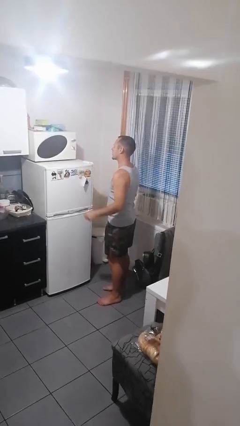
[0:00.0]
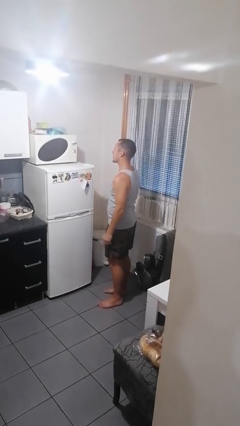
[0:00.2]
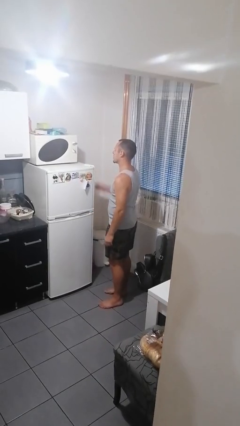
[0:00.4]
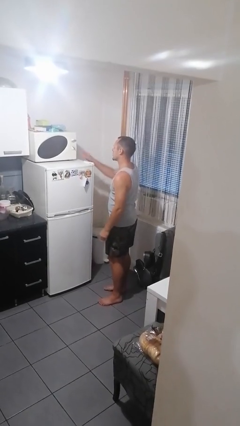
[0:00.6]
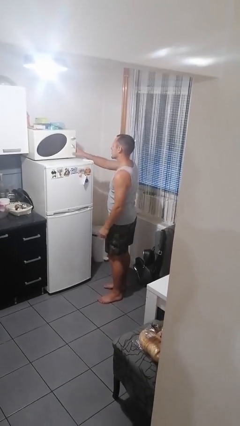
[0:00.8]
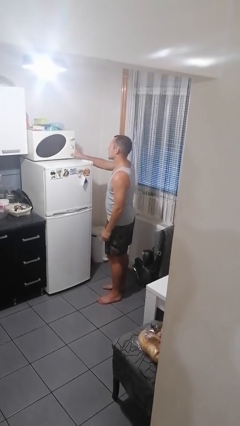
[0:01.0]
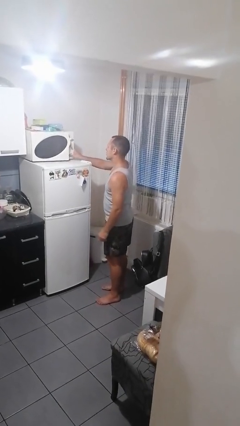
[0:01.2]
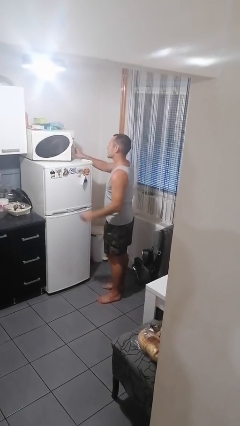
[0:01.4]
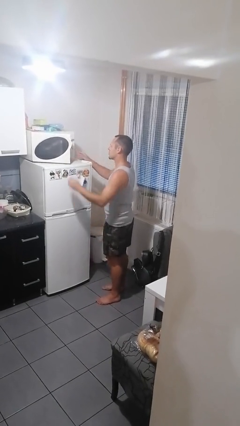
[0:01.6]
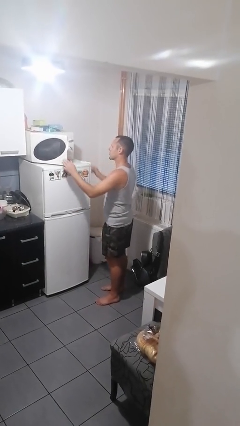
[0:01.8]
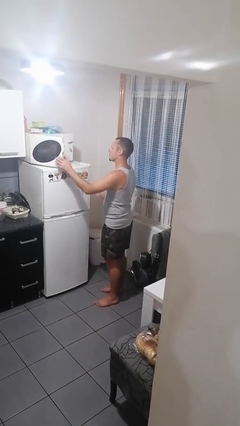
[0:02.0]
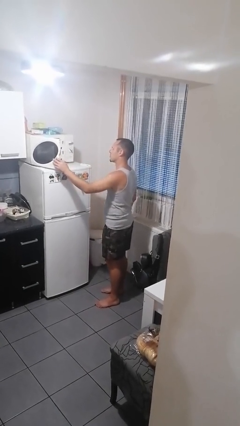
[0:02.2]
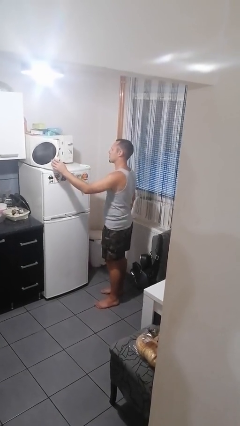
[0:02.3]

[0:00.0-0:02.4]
person opens microwave

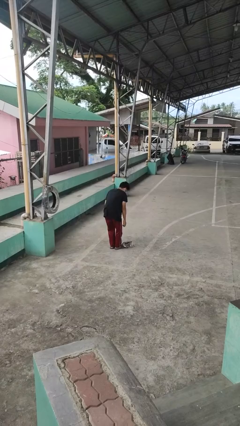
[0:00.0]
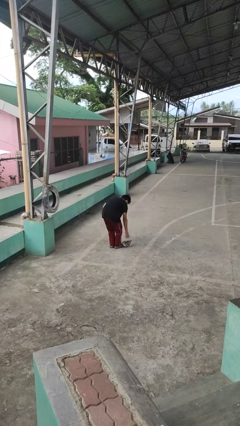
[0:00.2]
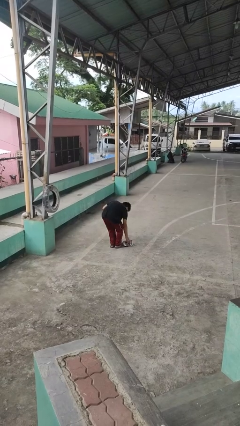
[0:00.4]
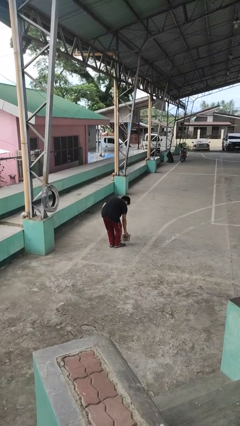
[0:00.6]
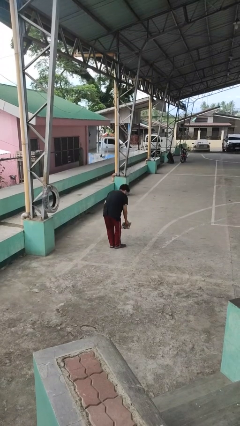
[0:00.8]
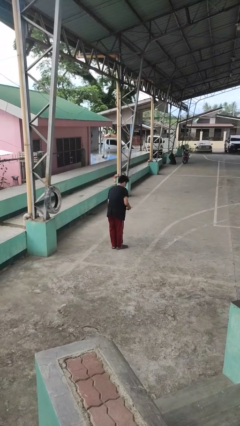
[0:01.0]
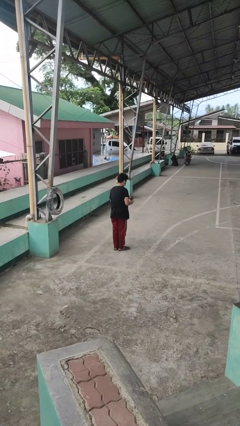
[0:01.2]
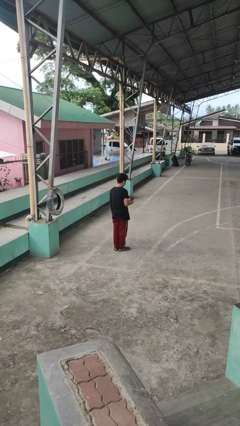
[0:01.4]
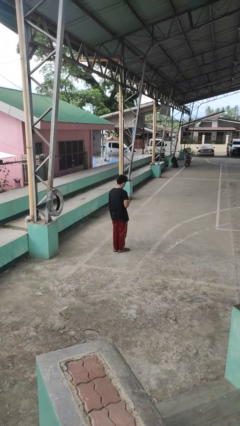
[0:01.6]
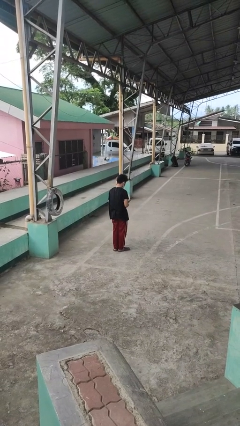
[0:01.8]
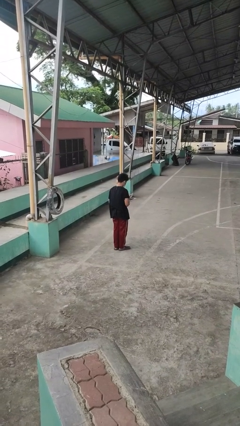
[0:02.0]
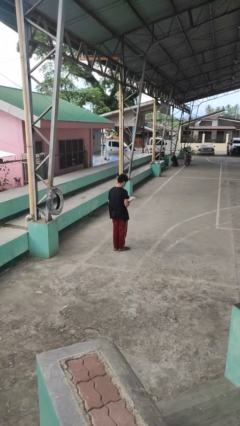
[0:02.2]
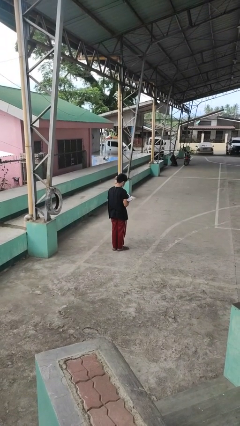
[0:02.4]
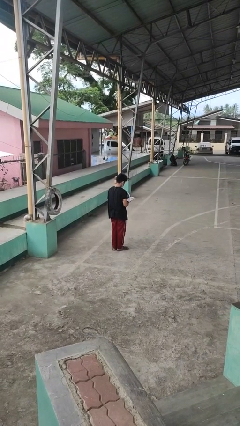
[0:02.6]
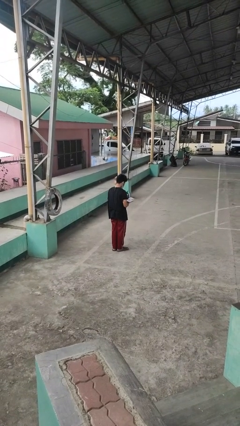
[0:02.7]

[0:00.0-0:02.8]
person picks up object from floor

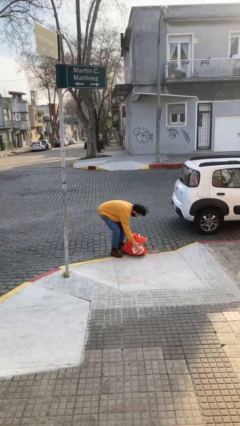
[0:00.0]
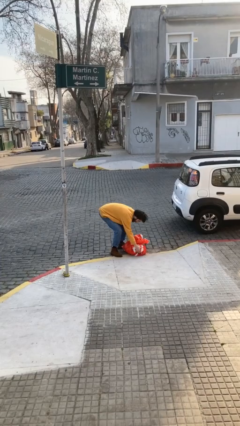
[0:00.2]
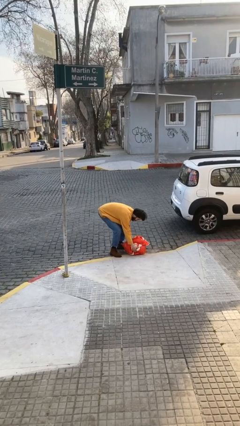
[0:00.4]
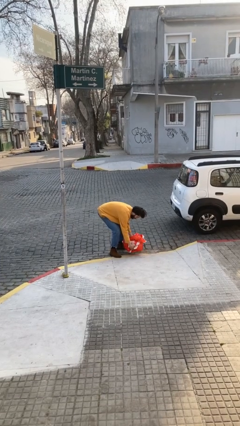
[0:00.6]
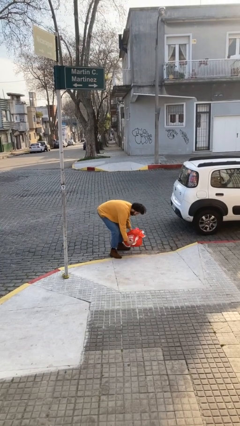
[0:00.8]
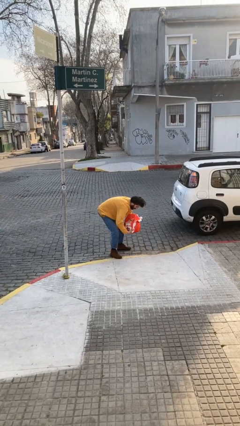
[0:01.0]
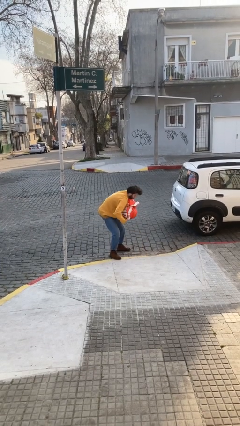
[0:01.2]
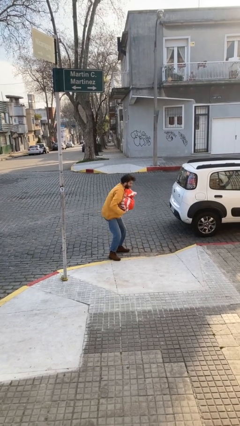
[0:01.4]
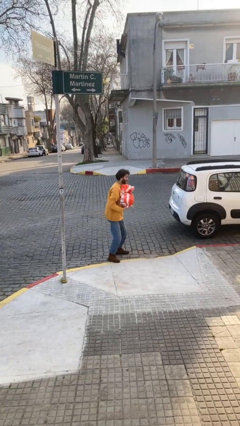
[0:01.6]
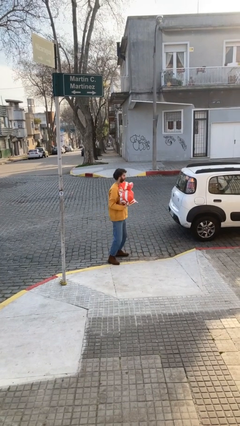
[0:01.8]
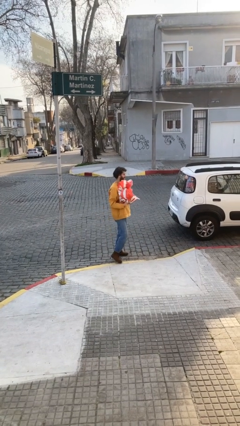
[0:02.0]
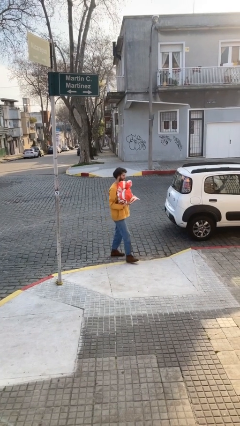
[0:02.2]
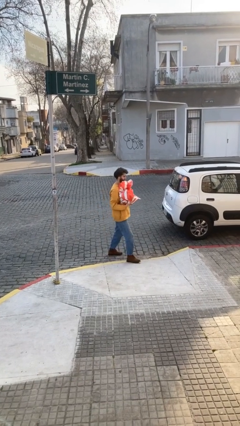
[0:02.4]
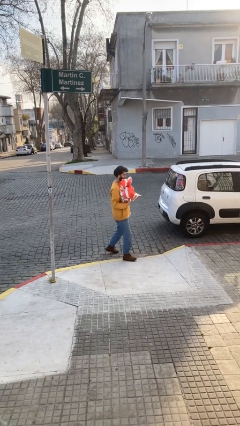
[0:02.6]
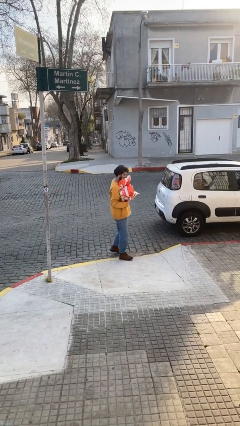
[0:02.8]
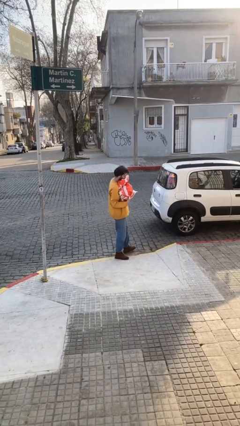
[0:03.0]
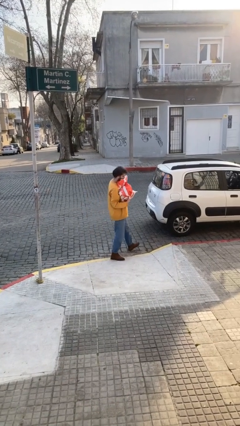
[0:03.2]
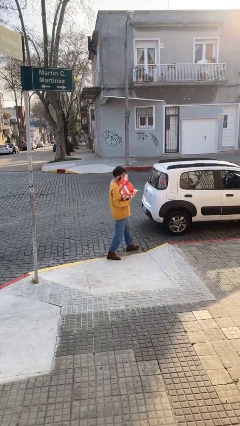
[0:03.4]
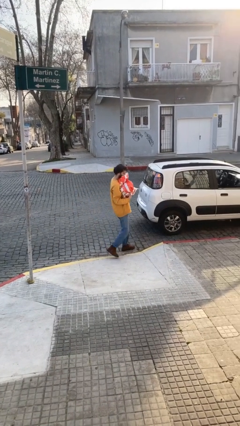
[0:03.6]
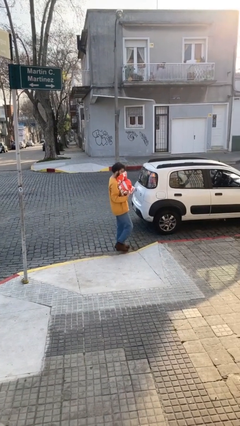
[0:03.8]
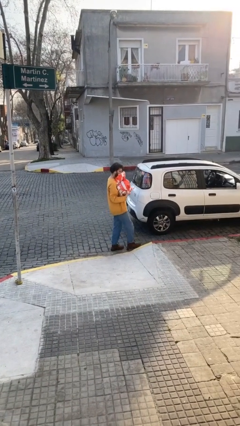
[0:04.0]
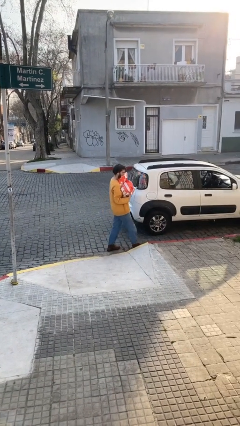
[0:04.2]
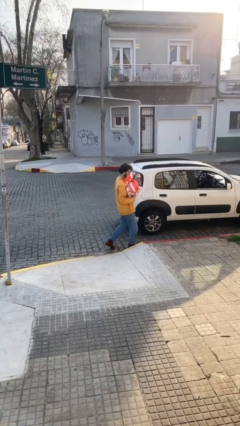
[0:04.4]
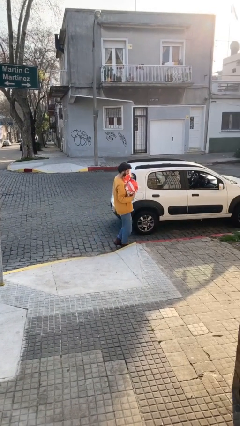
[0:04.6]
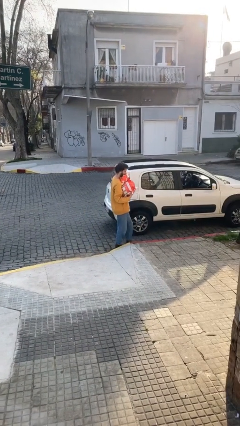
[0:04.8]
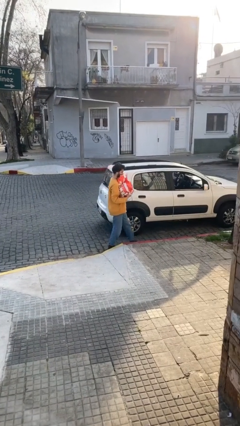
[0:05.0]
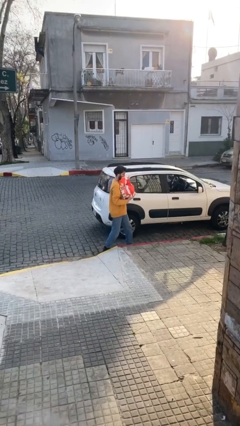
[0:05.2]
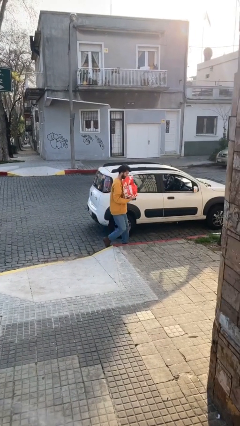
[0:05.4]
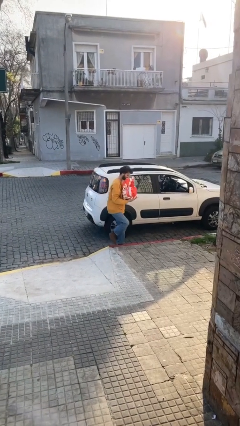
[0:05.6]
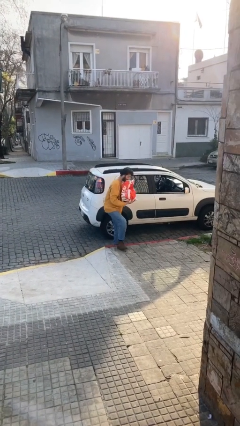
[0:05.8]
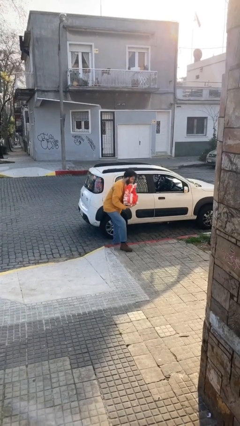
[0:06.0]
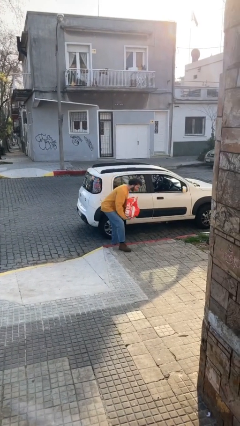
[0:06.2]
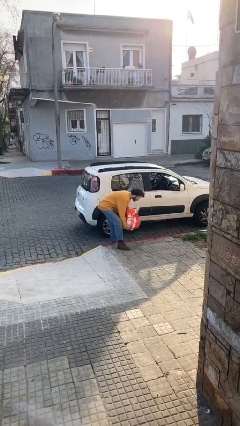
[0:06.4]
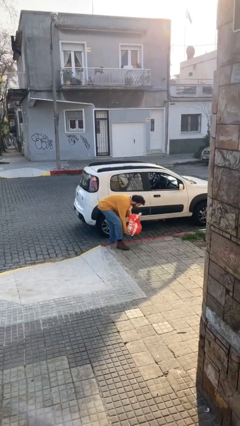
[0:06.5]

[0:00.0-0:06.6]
person carries heavy object

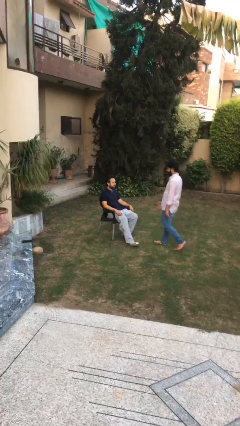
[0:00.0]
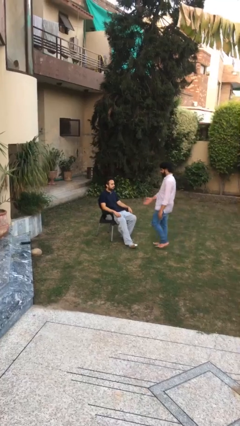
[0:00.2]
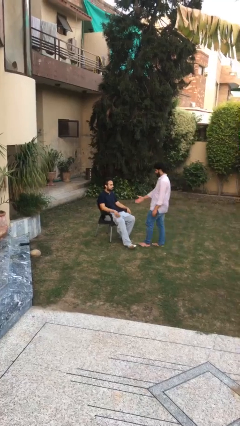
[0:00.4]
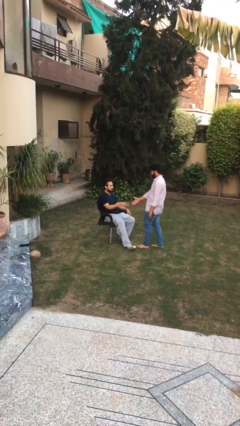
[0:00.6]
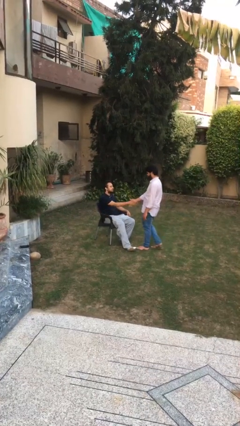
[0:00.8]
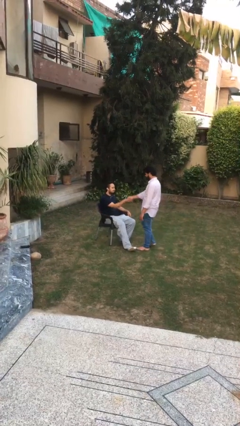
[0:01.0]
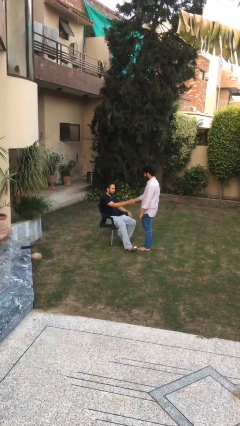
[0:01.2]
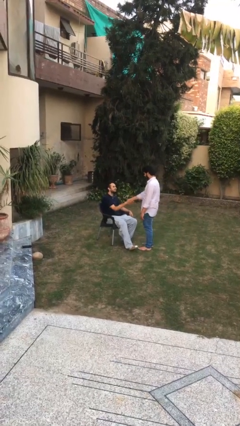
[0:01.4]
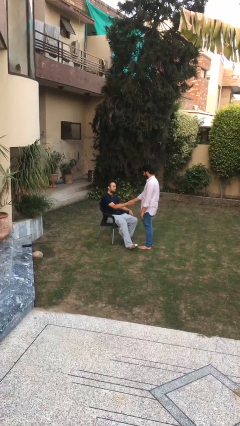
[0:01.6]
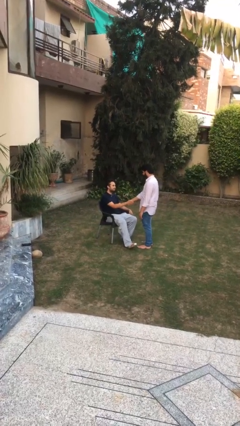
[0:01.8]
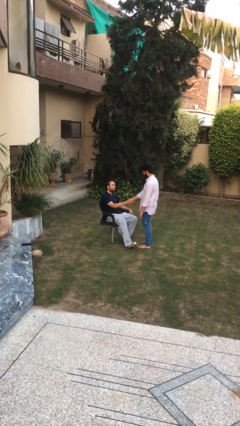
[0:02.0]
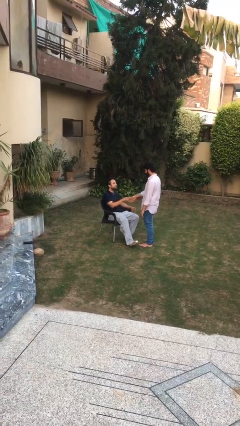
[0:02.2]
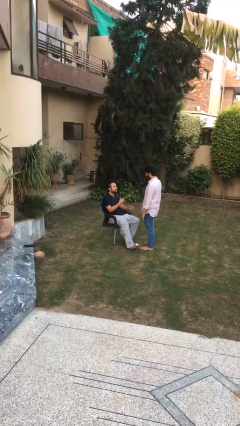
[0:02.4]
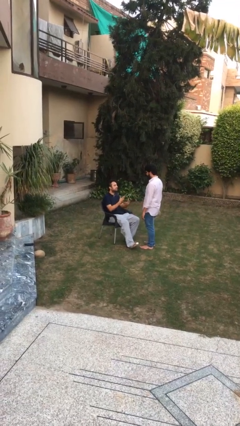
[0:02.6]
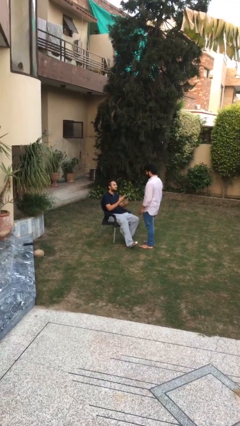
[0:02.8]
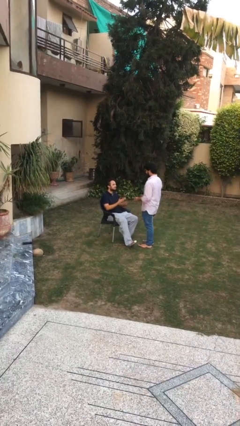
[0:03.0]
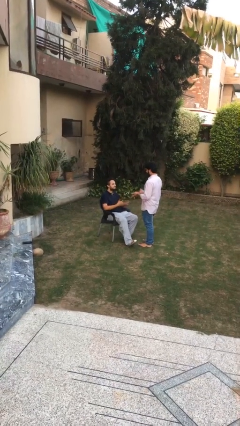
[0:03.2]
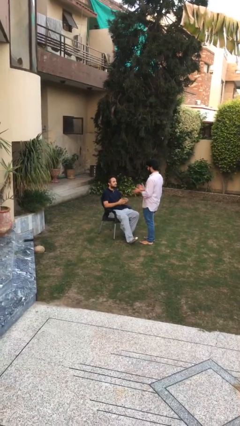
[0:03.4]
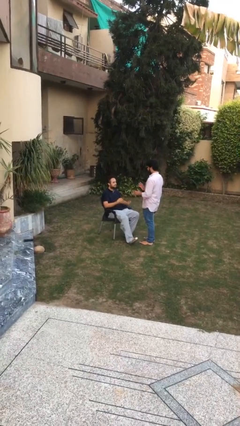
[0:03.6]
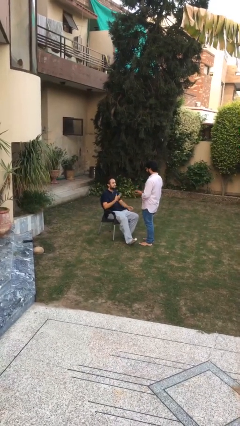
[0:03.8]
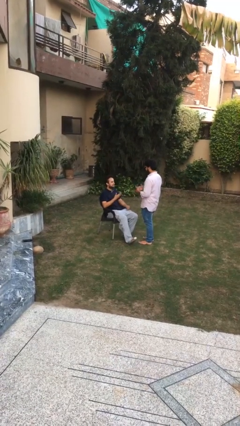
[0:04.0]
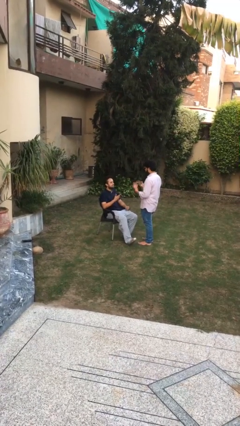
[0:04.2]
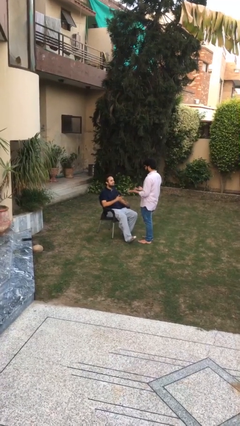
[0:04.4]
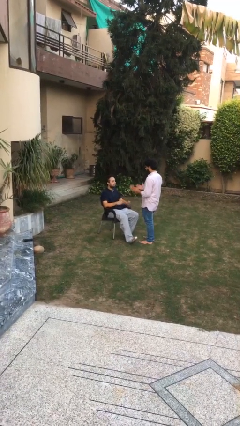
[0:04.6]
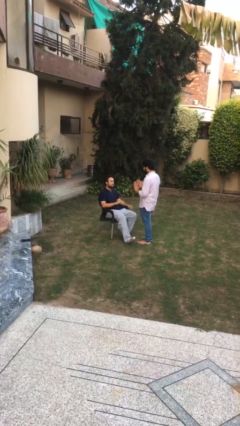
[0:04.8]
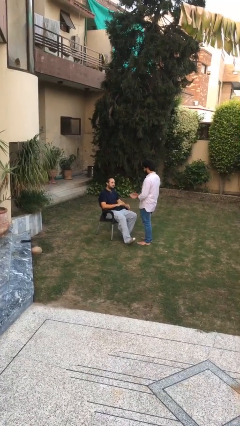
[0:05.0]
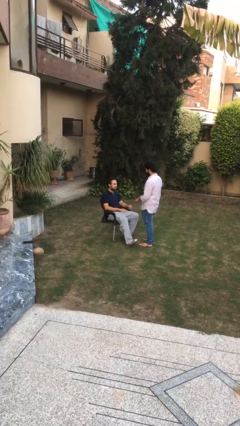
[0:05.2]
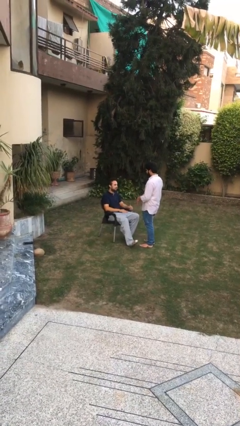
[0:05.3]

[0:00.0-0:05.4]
person shakes hand

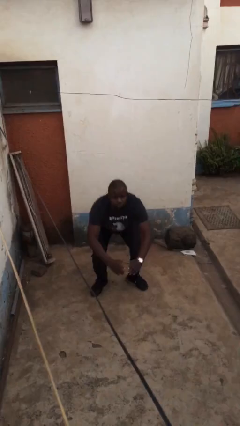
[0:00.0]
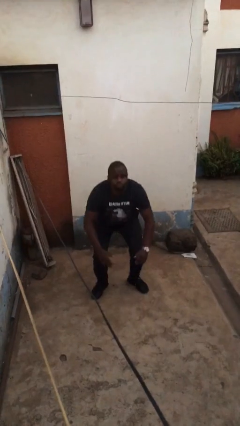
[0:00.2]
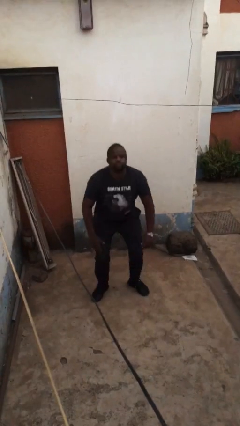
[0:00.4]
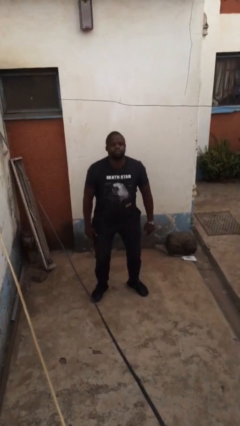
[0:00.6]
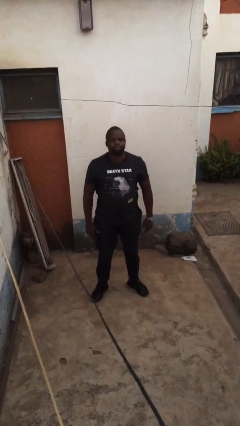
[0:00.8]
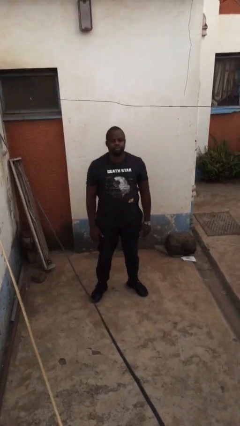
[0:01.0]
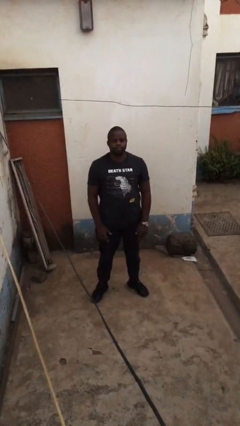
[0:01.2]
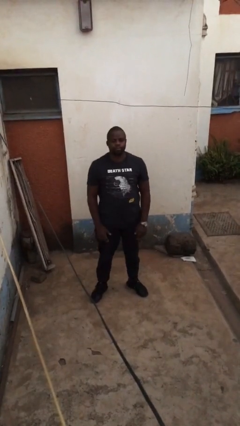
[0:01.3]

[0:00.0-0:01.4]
person stands up
